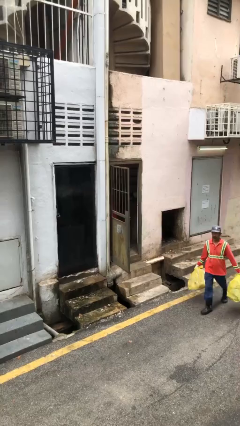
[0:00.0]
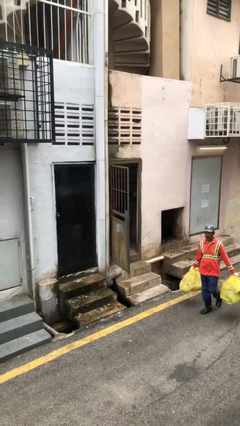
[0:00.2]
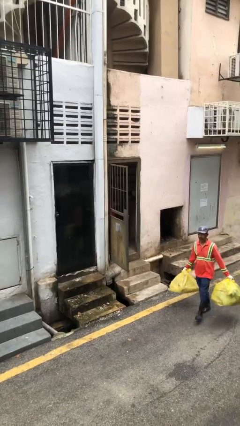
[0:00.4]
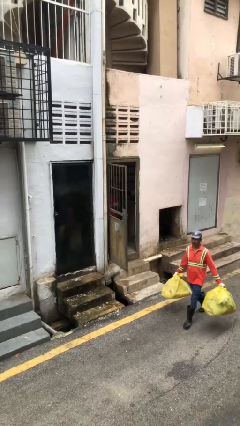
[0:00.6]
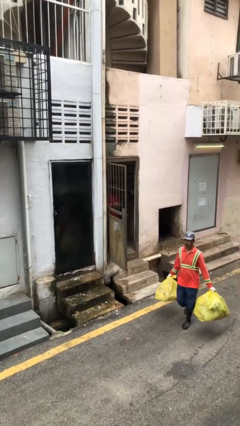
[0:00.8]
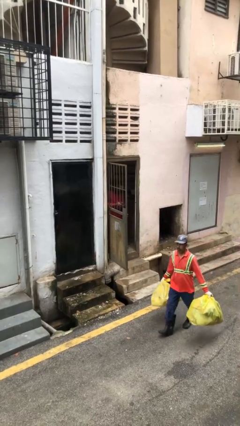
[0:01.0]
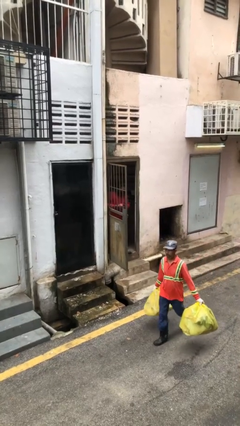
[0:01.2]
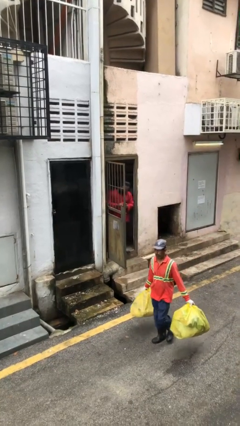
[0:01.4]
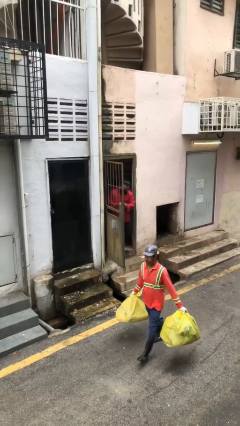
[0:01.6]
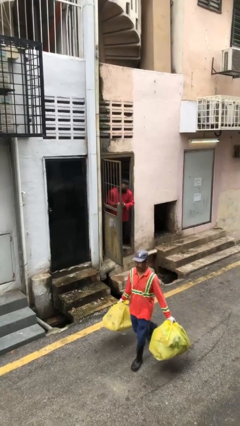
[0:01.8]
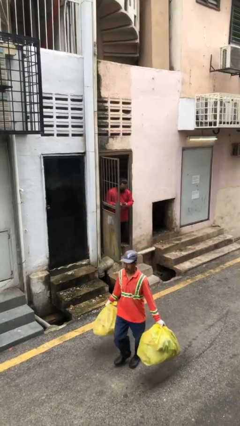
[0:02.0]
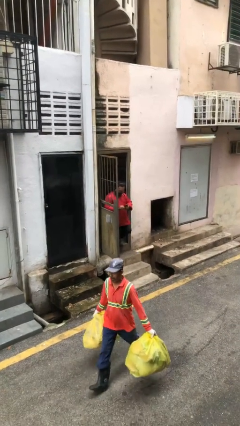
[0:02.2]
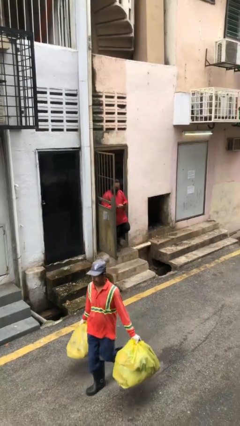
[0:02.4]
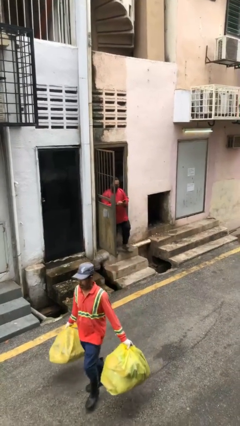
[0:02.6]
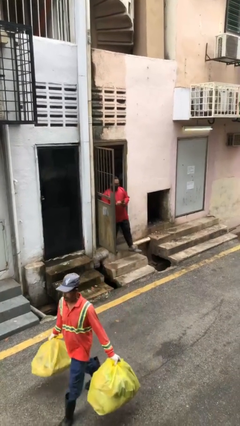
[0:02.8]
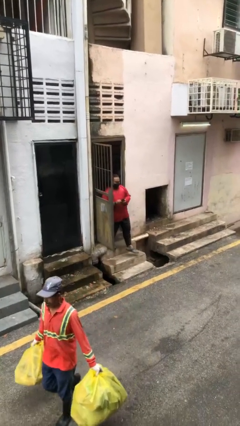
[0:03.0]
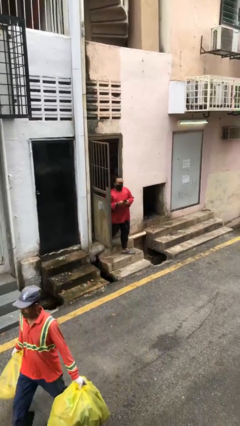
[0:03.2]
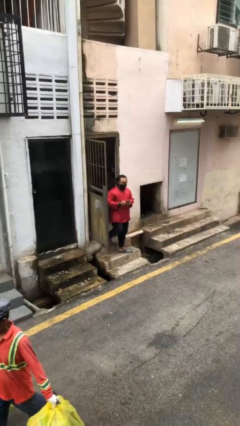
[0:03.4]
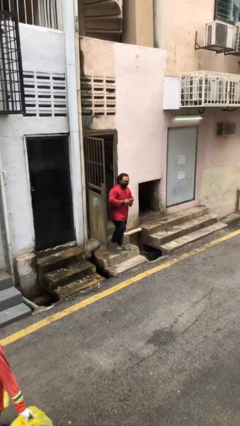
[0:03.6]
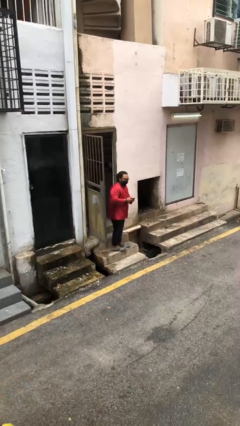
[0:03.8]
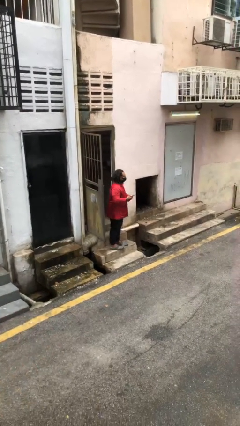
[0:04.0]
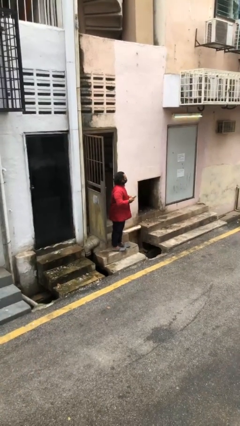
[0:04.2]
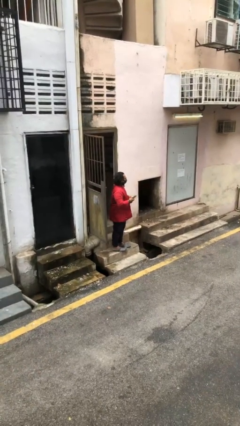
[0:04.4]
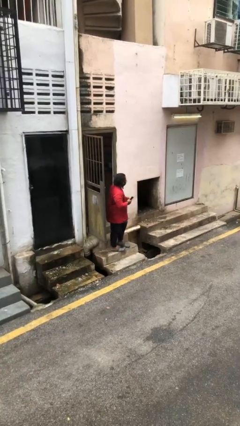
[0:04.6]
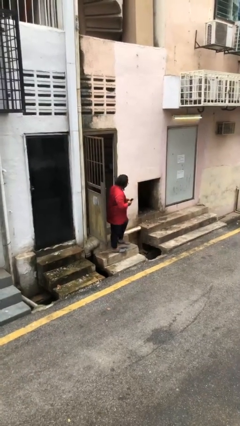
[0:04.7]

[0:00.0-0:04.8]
person enters scene through structure

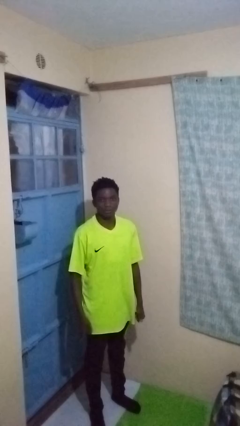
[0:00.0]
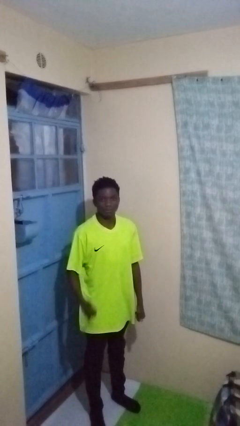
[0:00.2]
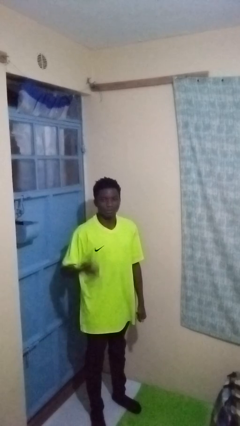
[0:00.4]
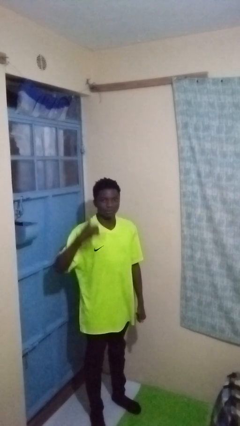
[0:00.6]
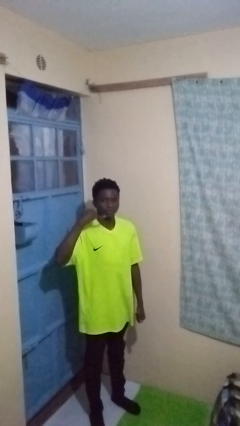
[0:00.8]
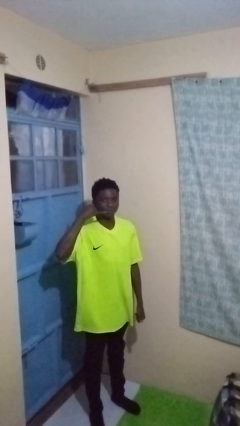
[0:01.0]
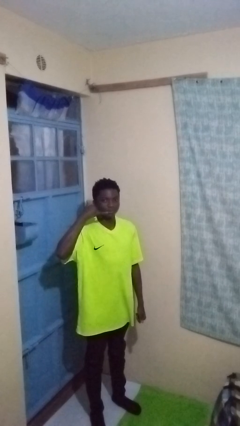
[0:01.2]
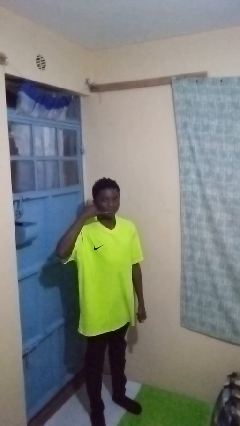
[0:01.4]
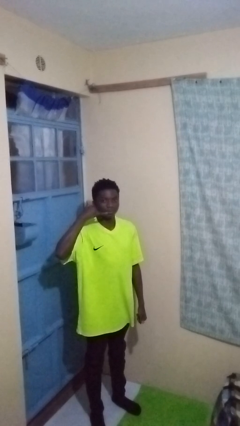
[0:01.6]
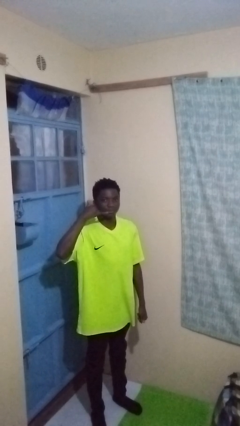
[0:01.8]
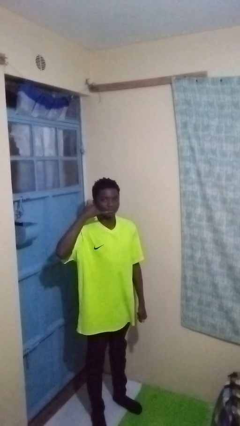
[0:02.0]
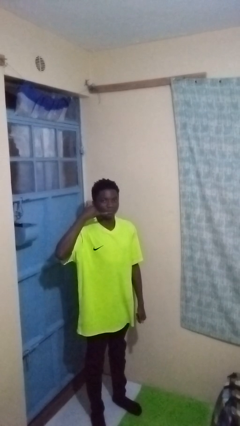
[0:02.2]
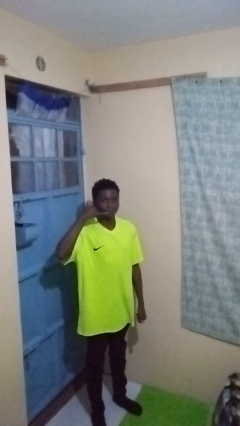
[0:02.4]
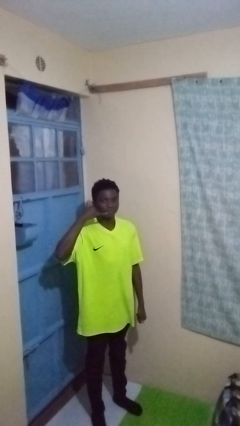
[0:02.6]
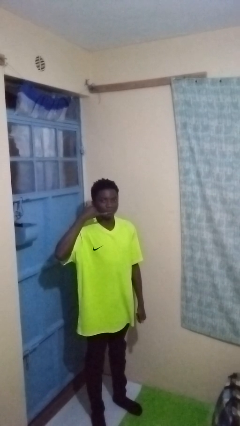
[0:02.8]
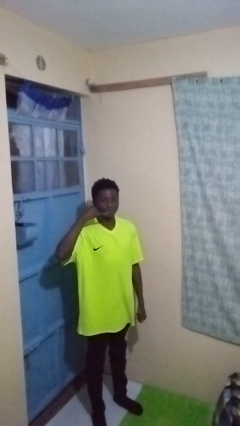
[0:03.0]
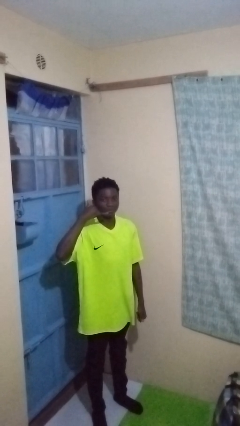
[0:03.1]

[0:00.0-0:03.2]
person gestures call me

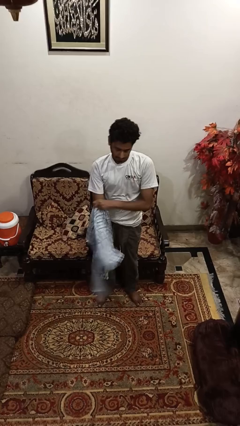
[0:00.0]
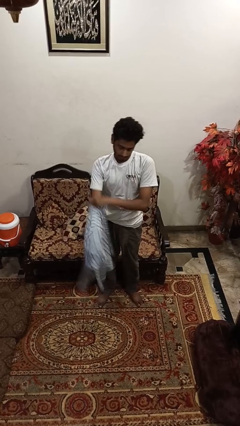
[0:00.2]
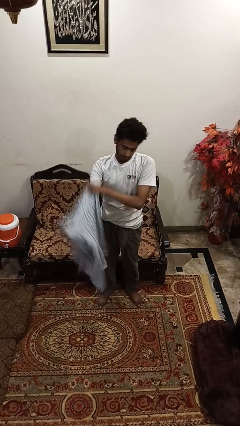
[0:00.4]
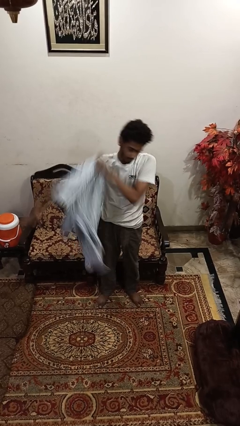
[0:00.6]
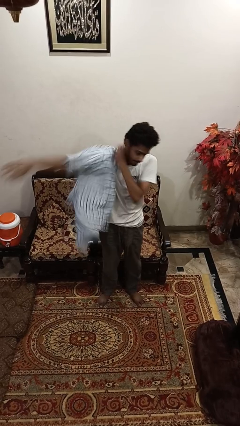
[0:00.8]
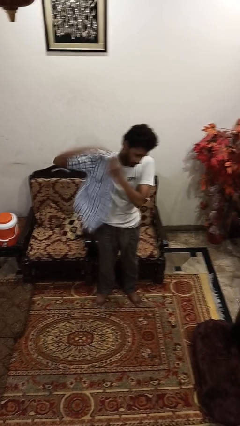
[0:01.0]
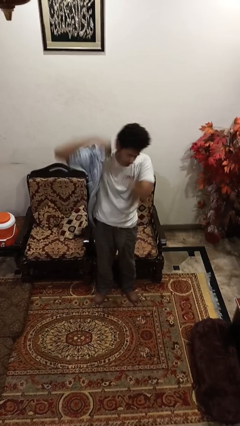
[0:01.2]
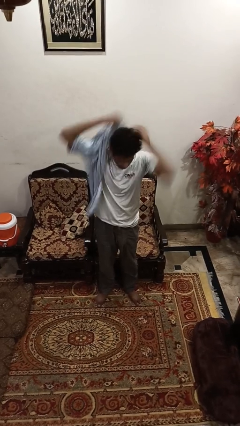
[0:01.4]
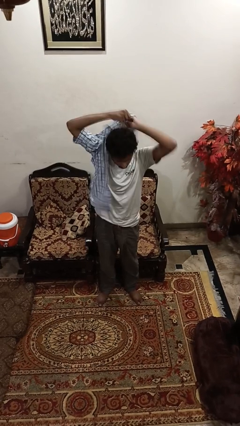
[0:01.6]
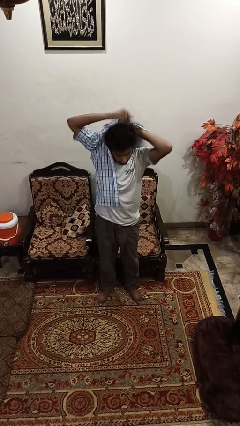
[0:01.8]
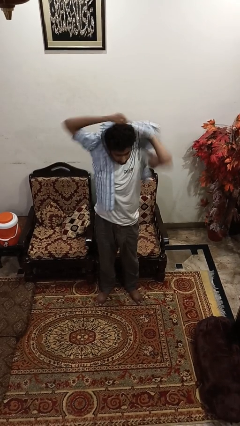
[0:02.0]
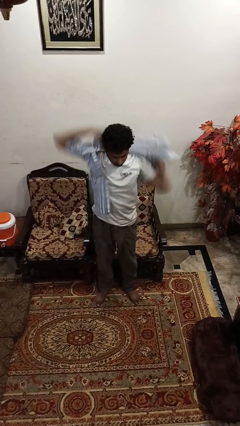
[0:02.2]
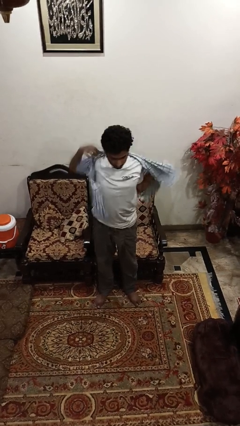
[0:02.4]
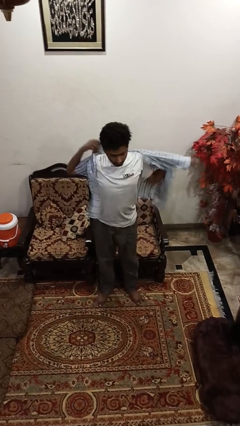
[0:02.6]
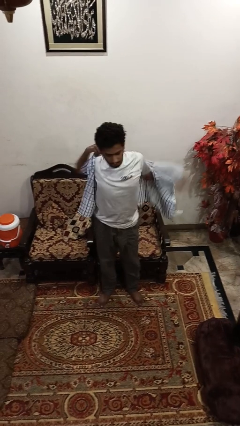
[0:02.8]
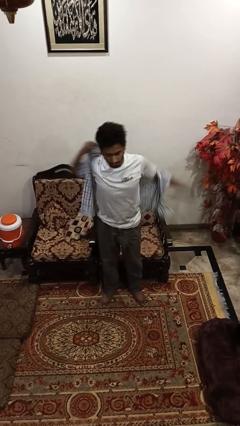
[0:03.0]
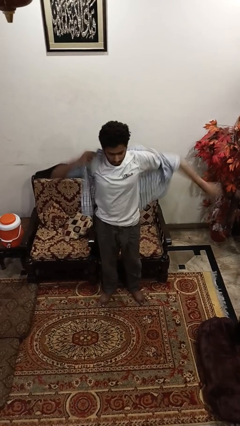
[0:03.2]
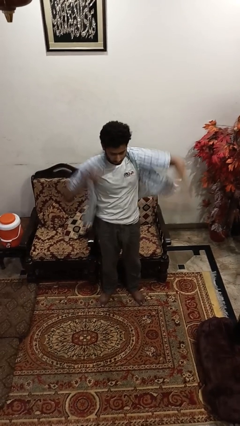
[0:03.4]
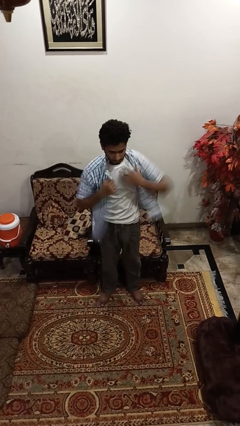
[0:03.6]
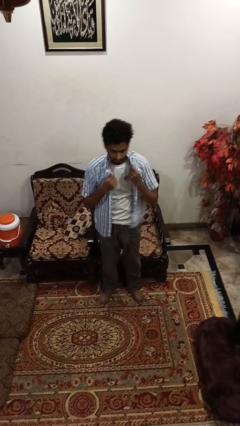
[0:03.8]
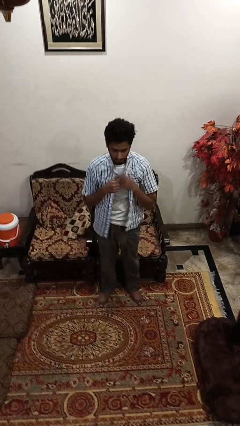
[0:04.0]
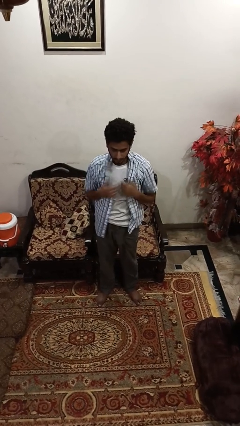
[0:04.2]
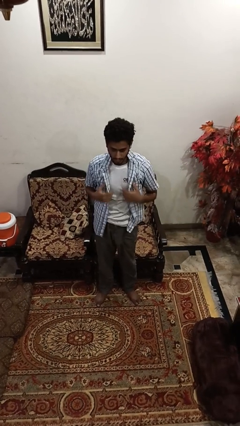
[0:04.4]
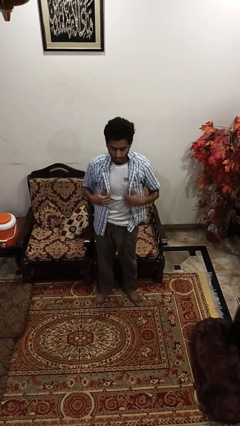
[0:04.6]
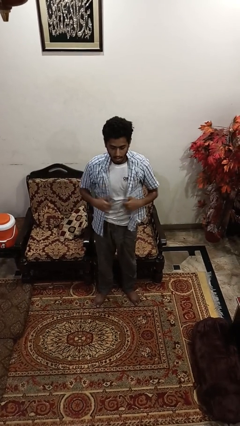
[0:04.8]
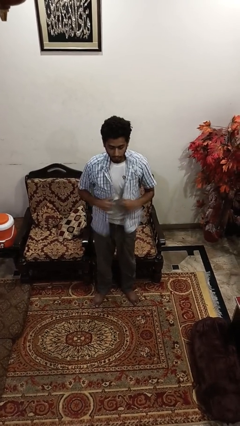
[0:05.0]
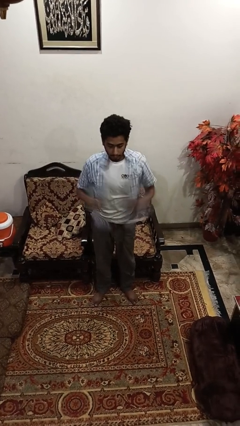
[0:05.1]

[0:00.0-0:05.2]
person puts on shirt

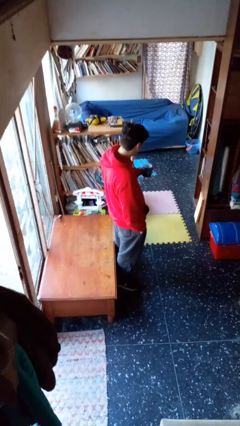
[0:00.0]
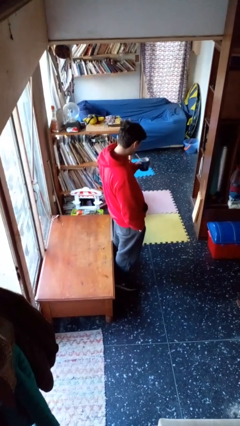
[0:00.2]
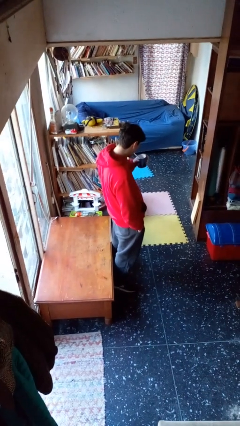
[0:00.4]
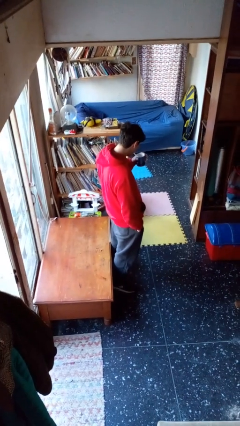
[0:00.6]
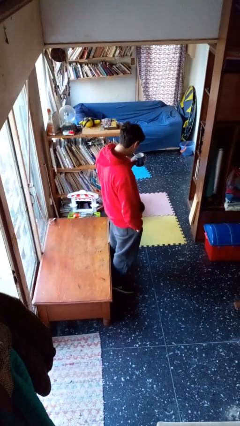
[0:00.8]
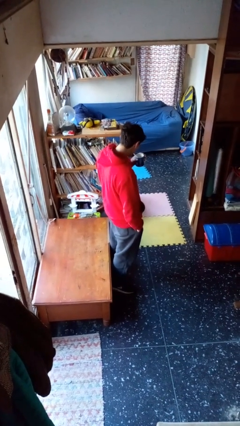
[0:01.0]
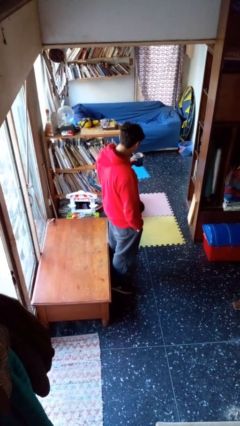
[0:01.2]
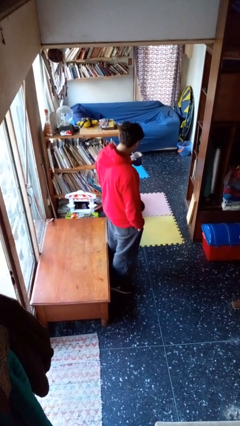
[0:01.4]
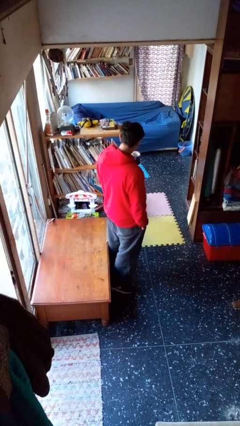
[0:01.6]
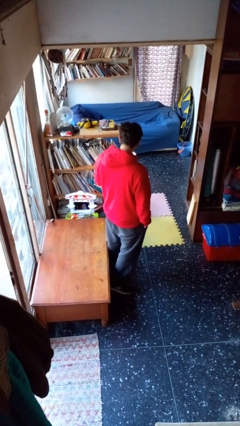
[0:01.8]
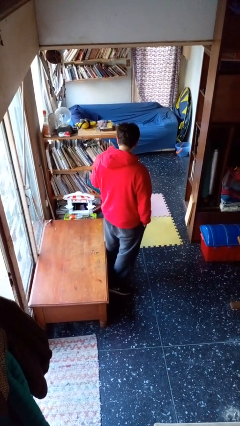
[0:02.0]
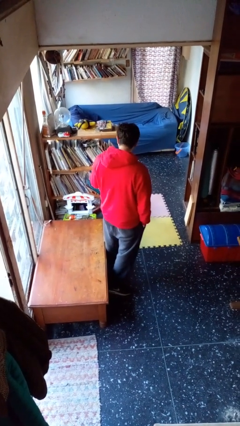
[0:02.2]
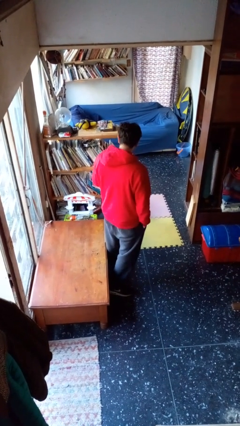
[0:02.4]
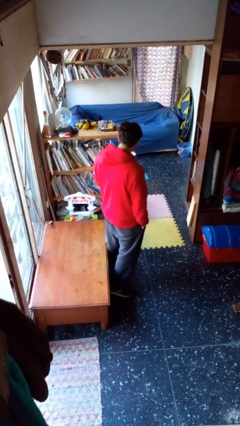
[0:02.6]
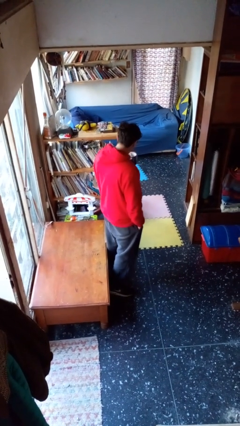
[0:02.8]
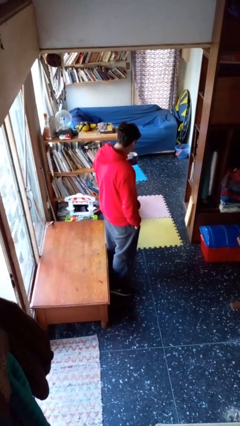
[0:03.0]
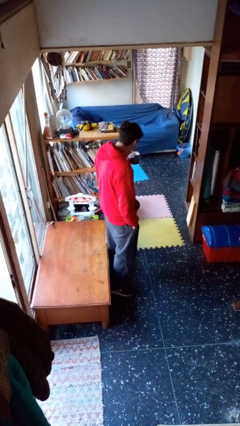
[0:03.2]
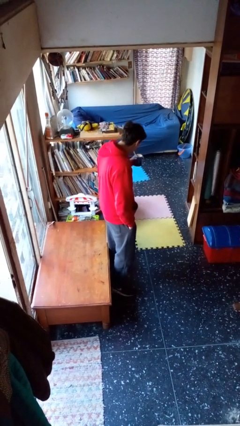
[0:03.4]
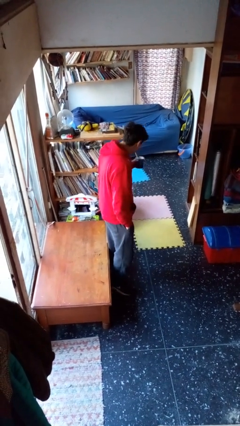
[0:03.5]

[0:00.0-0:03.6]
person drinks from straw

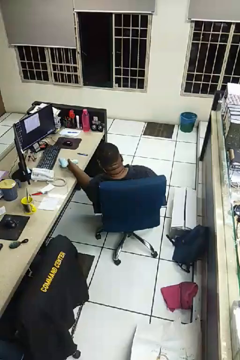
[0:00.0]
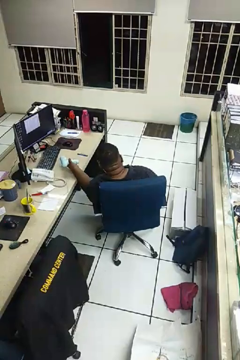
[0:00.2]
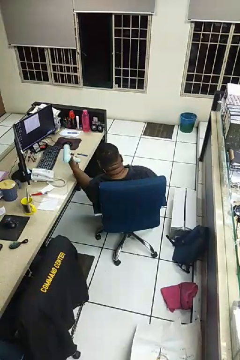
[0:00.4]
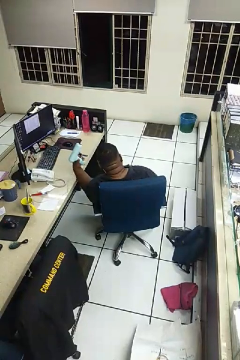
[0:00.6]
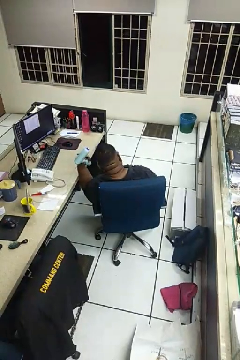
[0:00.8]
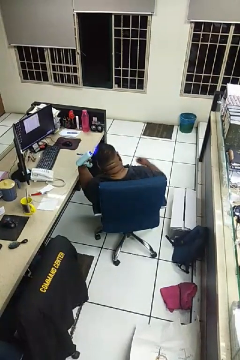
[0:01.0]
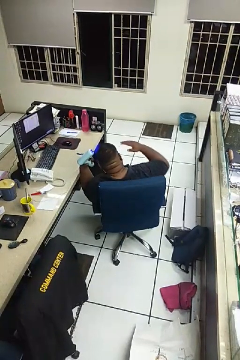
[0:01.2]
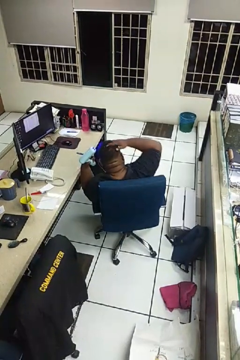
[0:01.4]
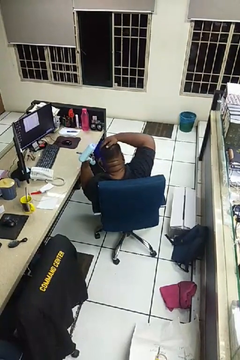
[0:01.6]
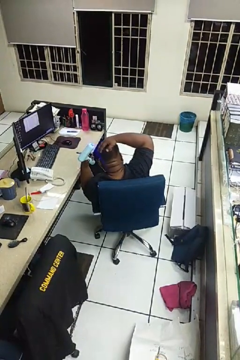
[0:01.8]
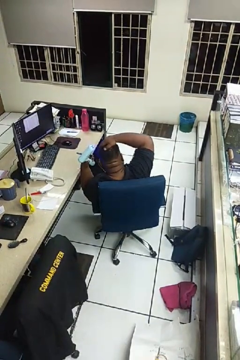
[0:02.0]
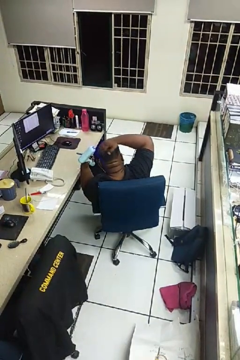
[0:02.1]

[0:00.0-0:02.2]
person dries hair with hairdryer
